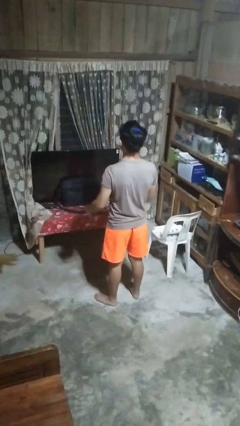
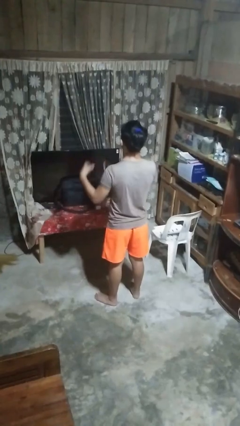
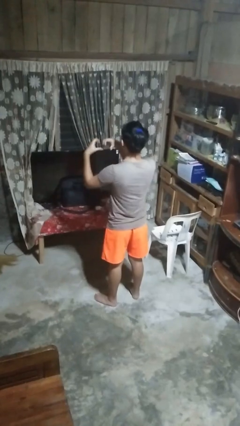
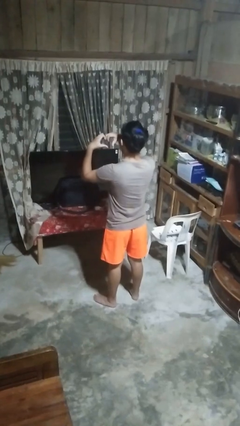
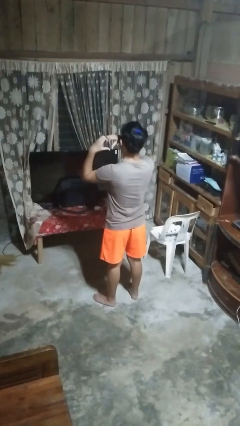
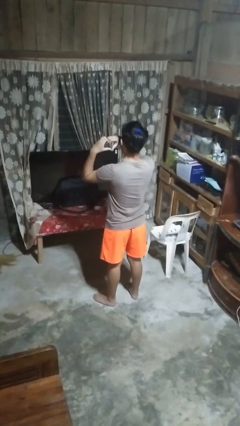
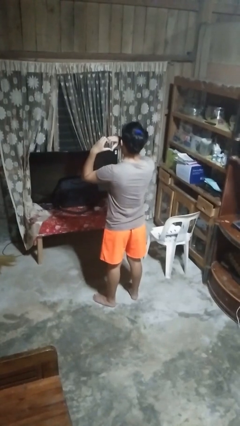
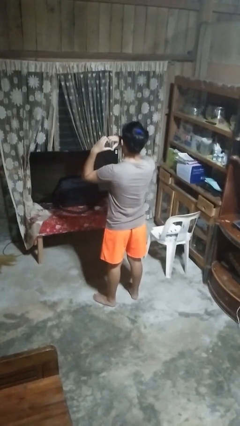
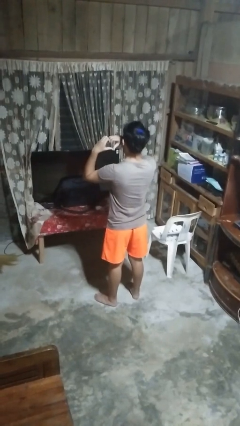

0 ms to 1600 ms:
person gestures heart

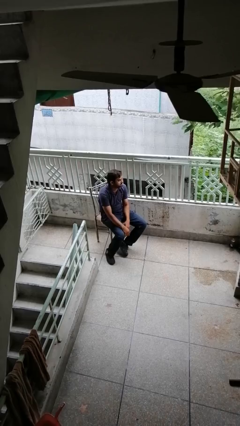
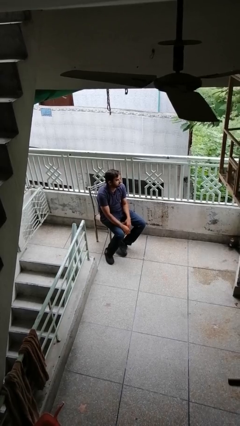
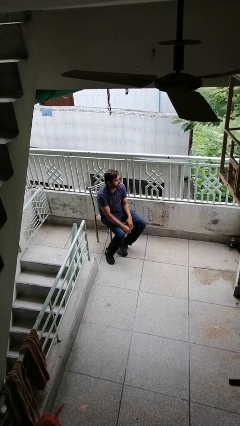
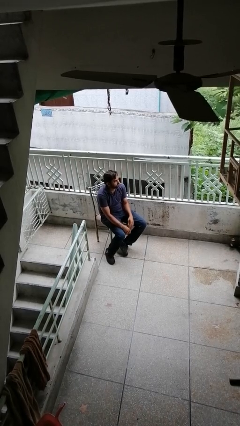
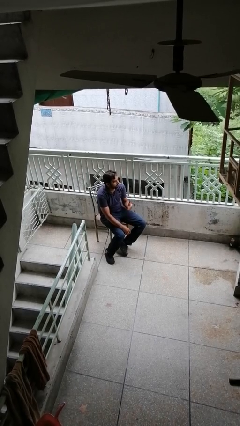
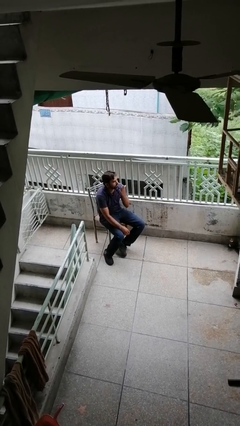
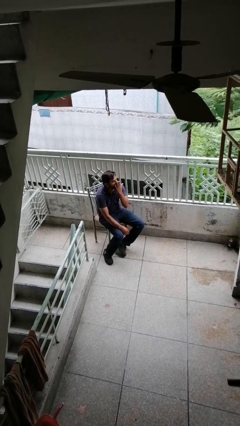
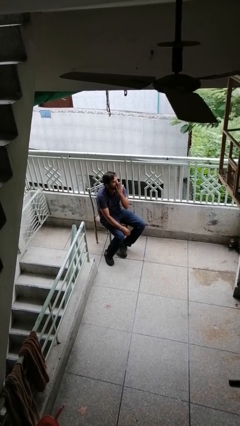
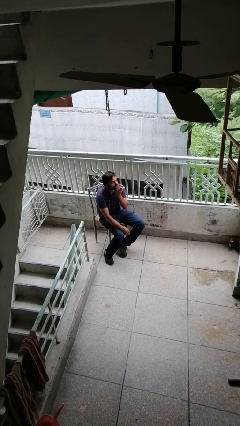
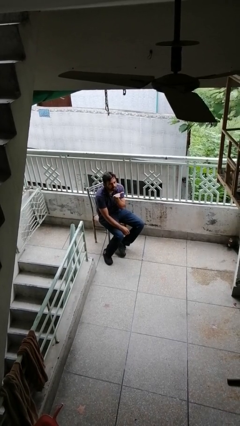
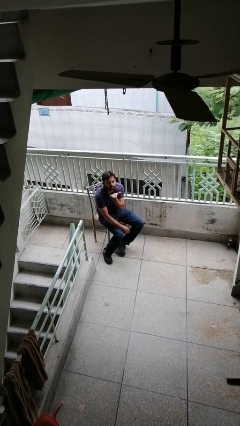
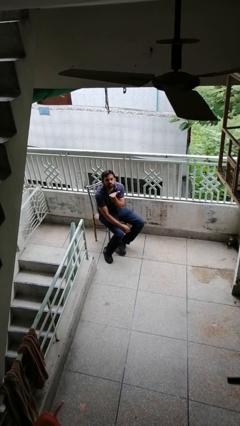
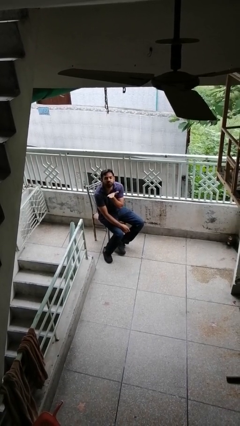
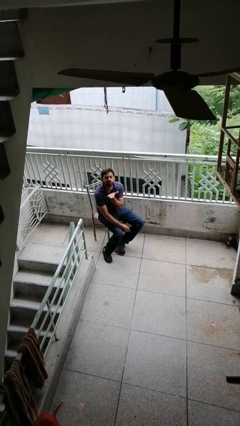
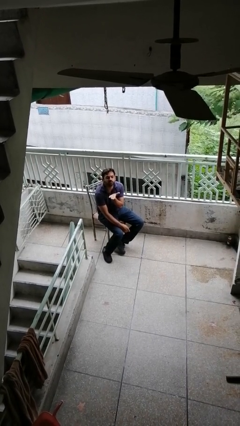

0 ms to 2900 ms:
person gestures blow kiss

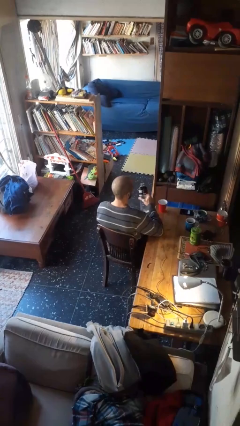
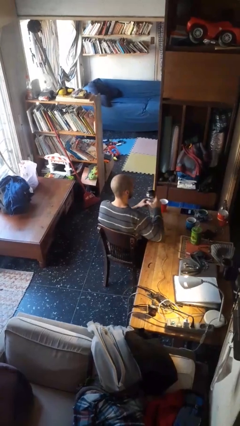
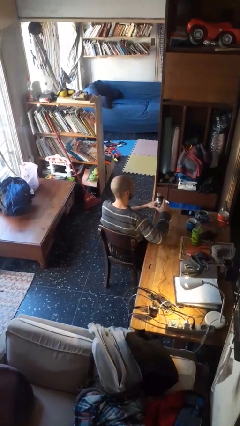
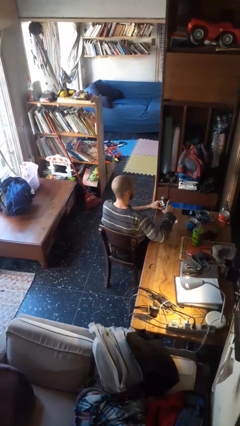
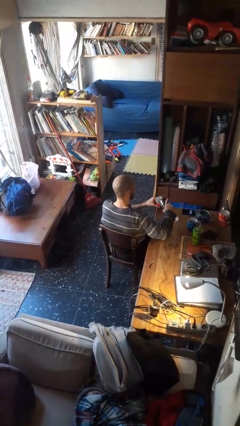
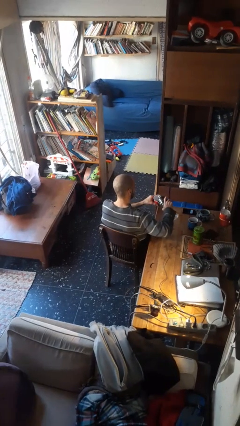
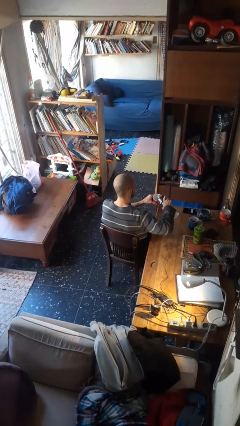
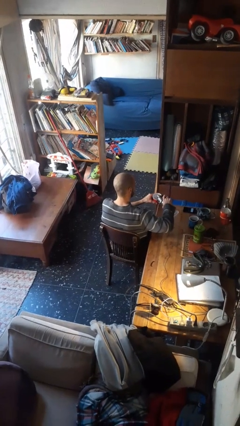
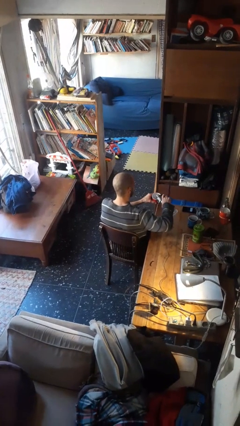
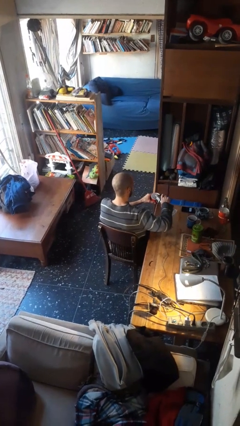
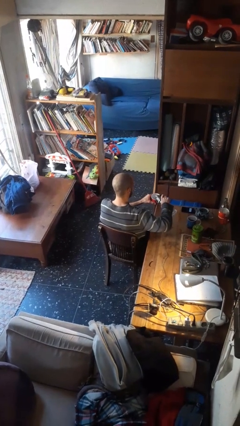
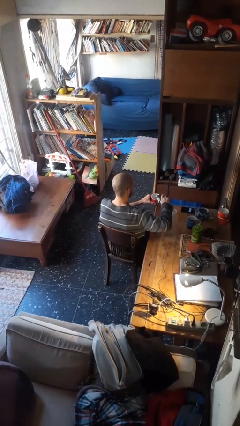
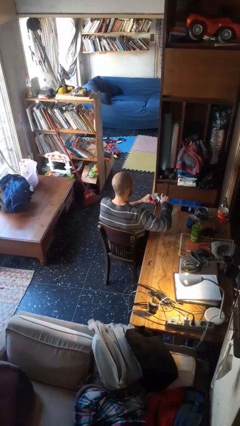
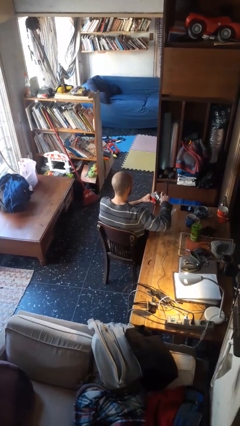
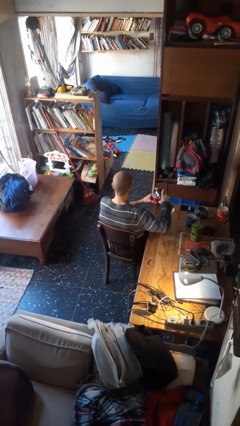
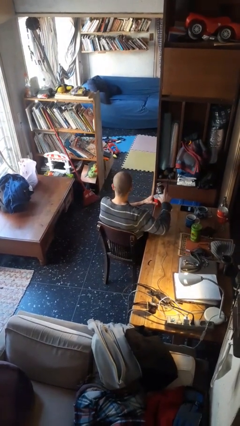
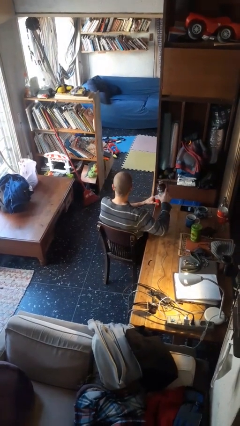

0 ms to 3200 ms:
person pours liquid into cup

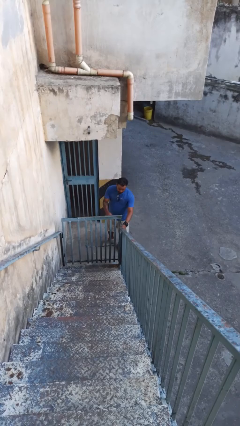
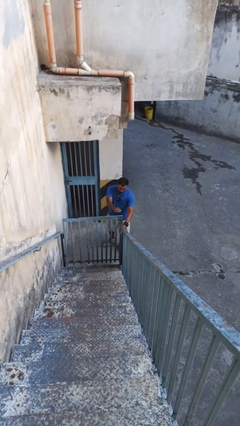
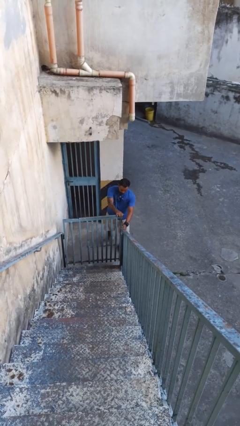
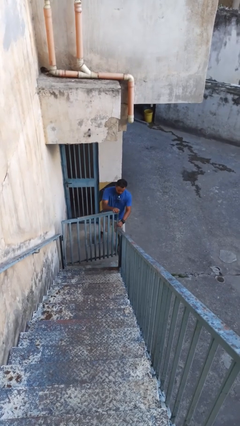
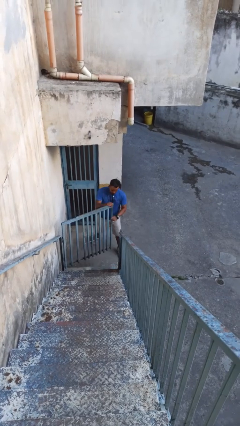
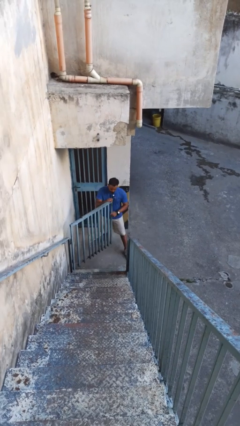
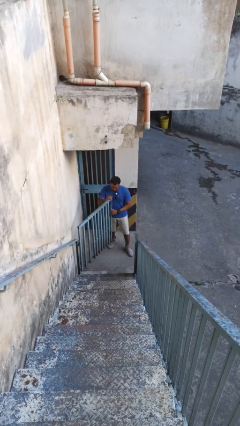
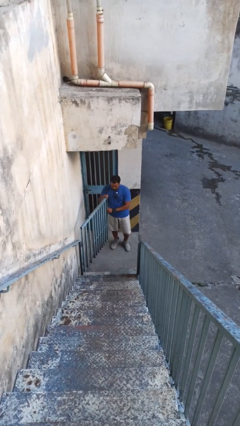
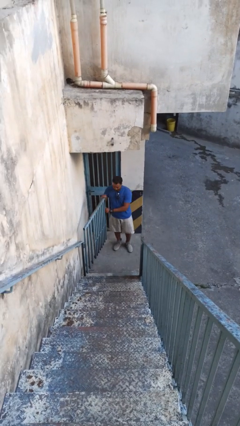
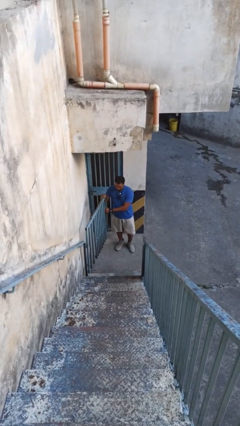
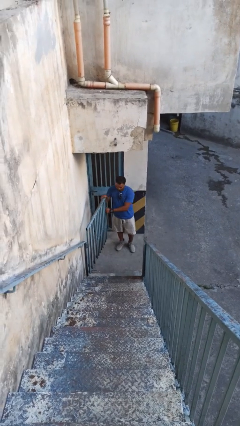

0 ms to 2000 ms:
person opens facility door

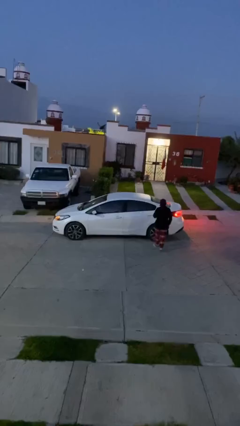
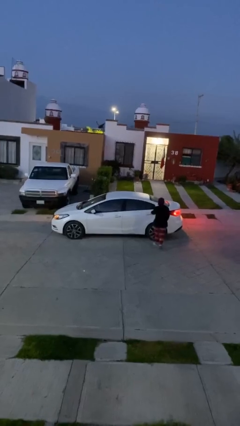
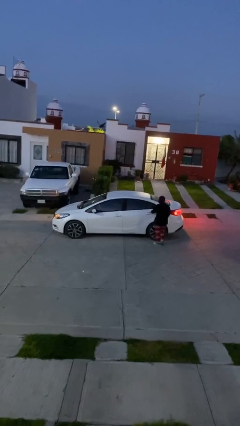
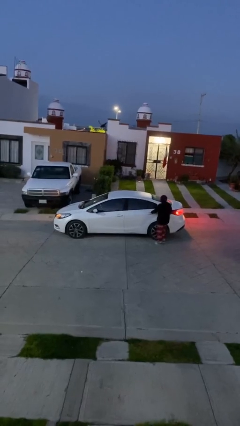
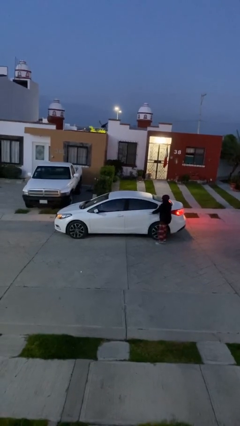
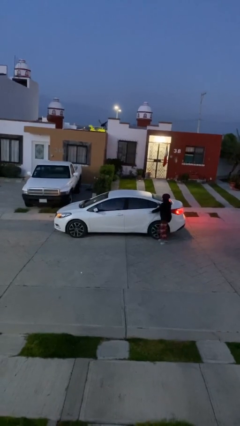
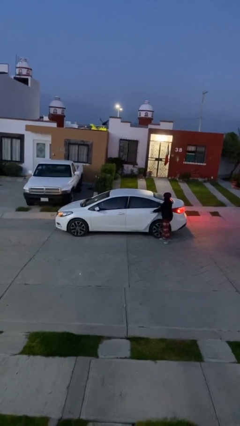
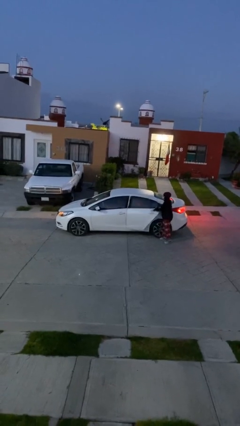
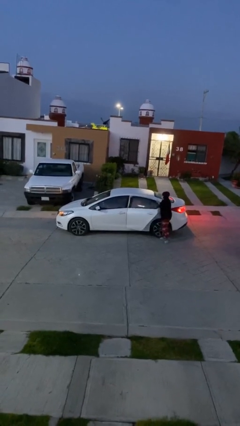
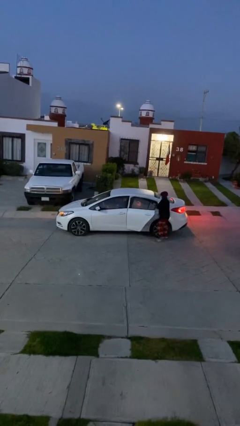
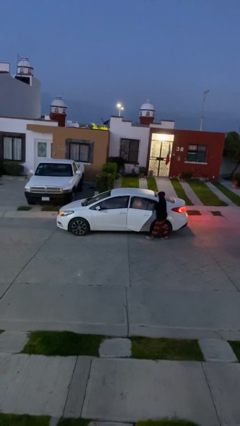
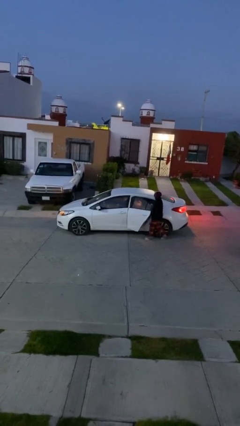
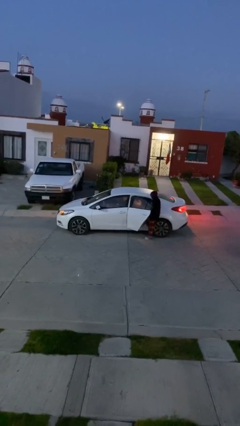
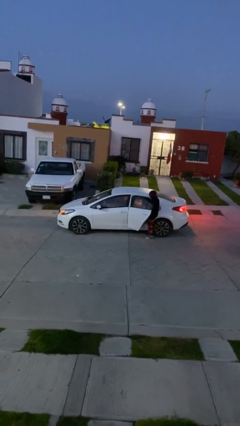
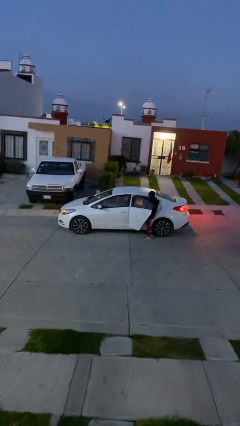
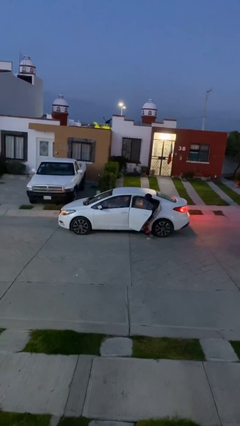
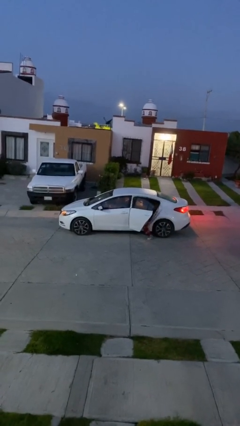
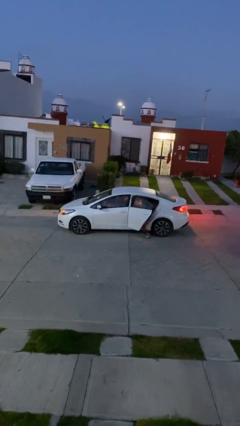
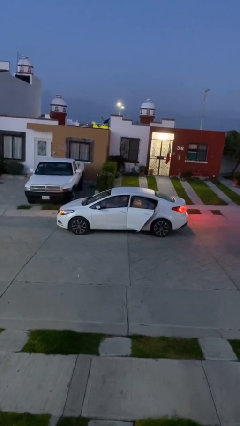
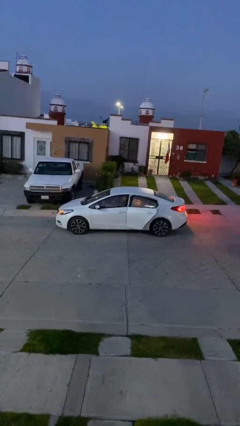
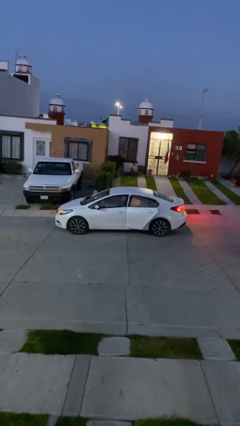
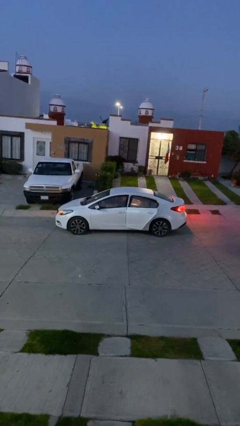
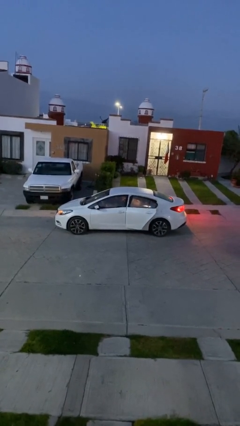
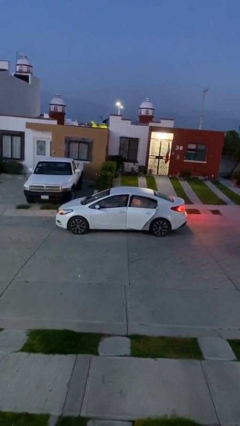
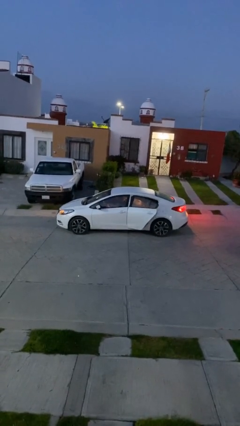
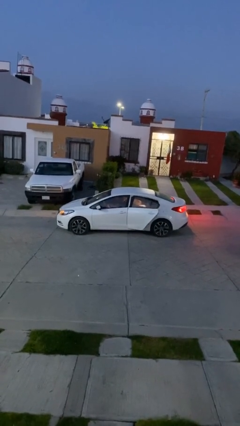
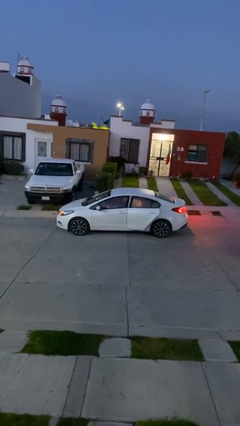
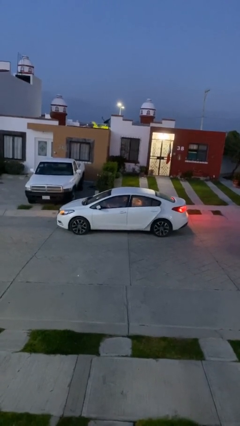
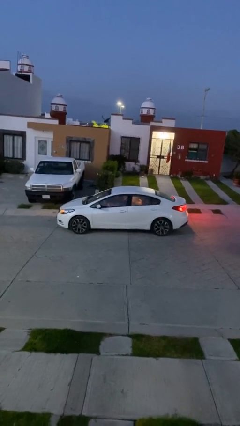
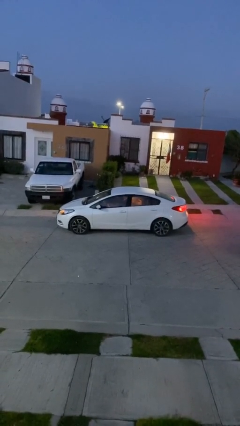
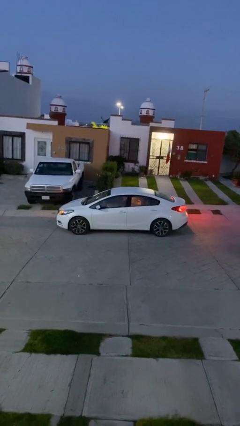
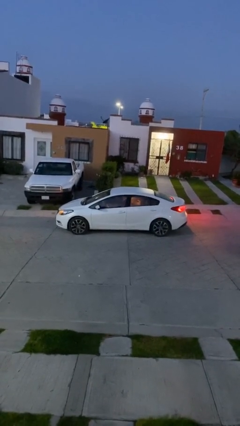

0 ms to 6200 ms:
car picks up person

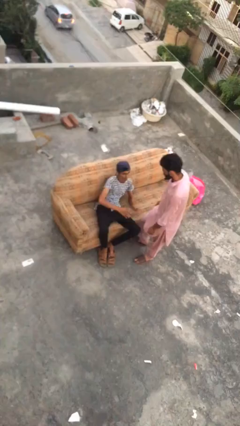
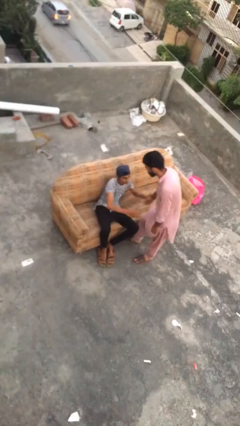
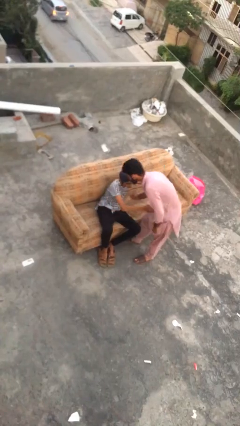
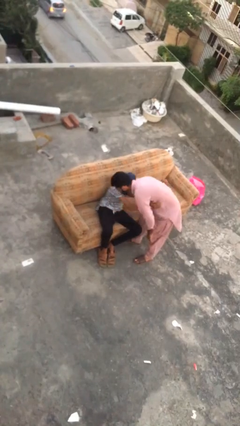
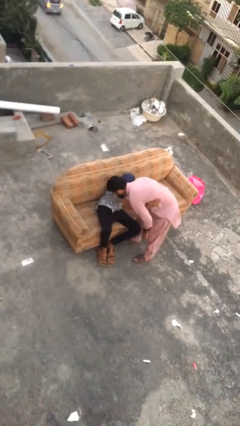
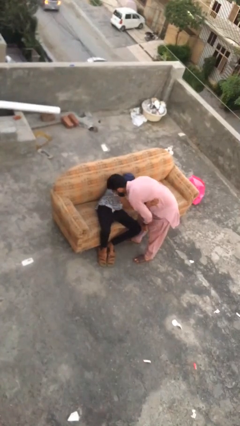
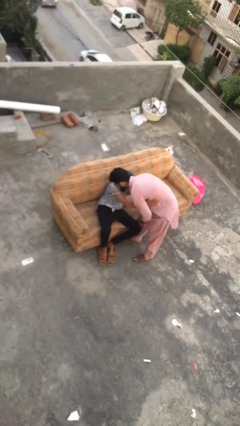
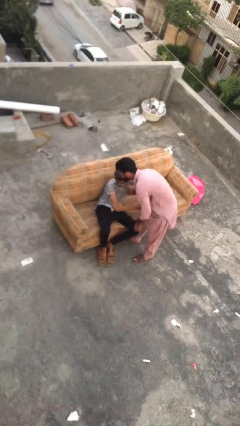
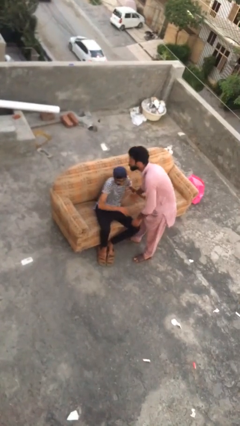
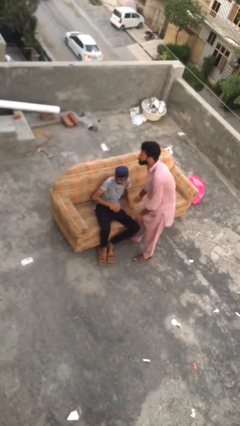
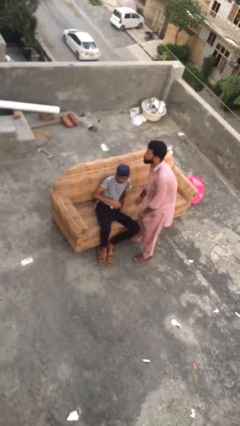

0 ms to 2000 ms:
person embraces person
